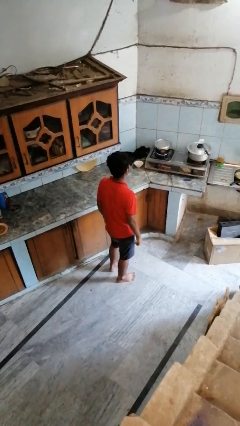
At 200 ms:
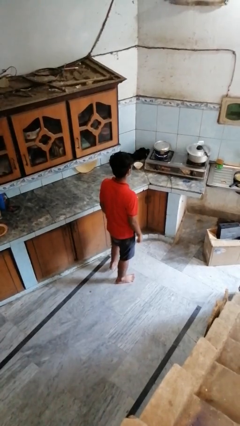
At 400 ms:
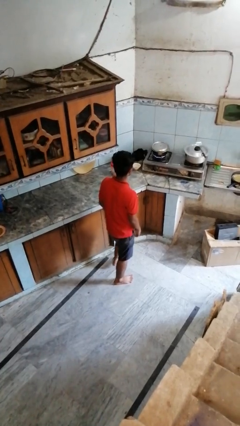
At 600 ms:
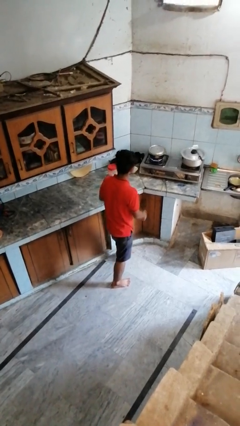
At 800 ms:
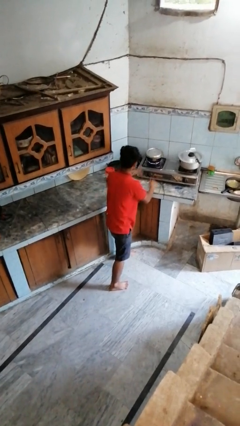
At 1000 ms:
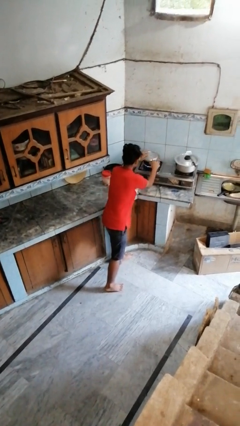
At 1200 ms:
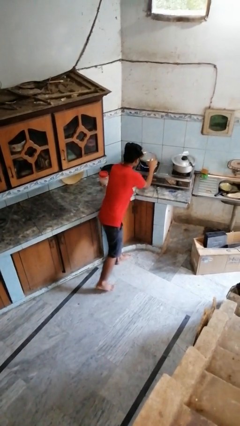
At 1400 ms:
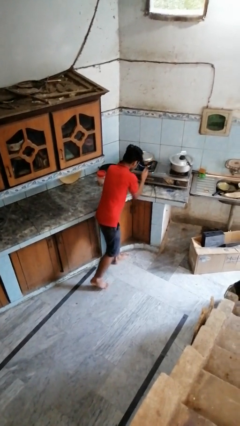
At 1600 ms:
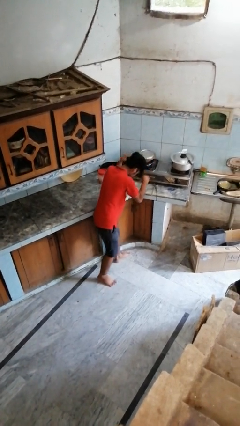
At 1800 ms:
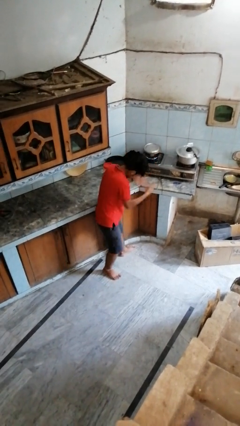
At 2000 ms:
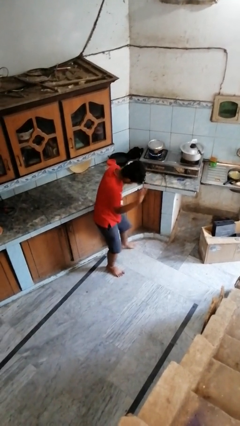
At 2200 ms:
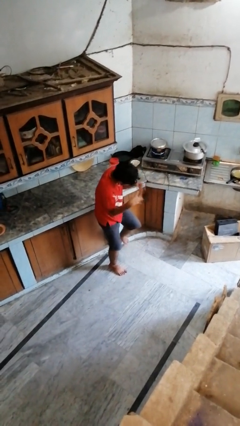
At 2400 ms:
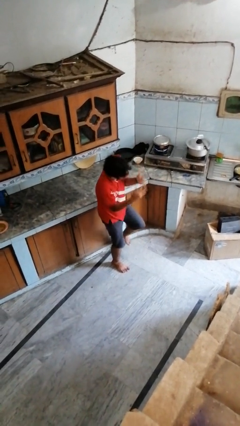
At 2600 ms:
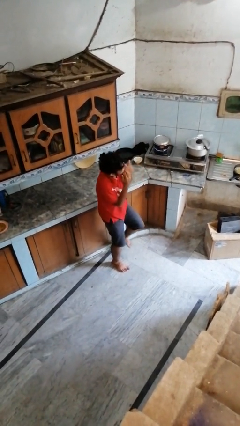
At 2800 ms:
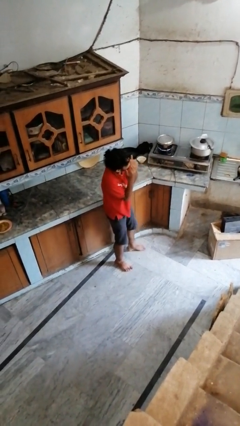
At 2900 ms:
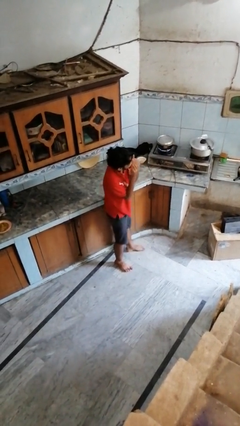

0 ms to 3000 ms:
person burns hand

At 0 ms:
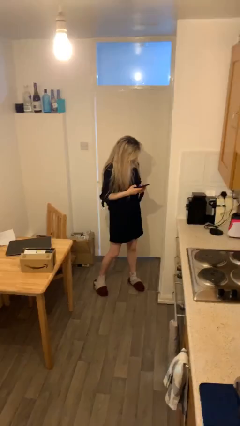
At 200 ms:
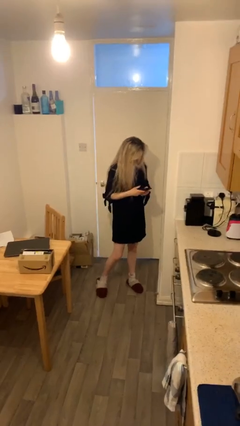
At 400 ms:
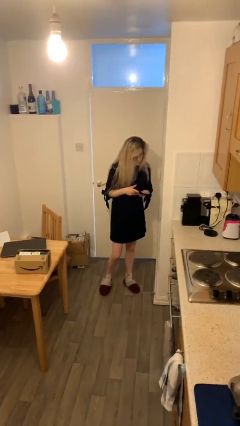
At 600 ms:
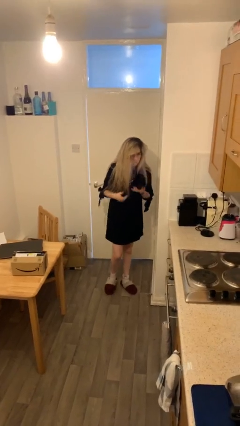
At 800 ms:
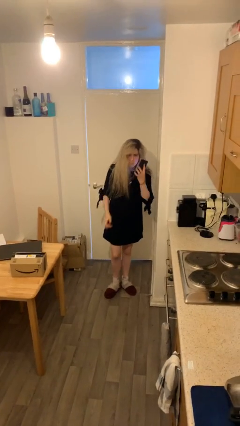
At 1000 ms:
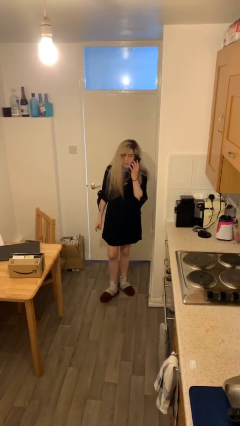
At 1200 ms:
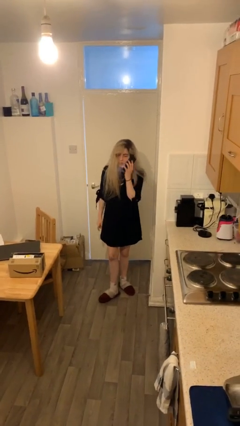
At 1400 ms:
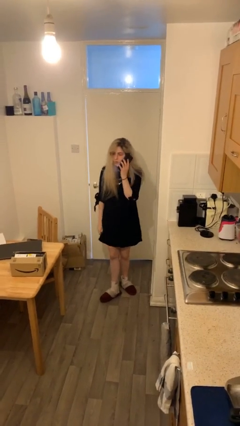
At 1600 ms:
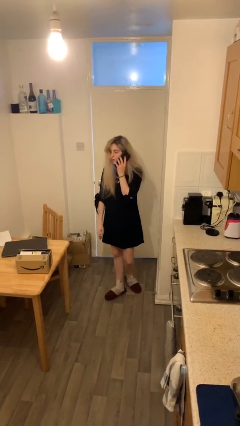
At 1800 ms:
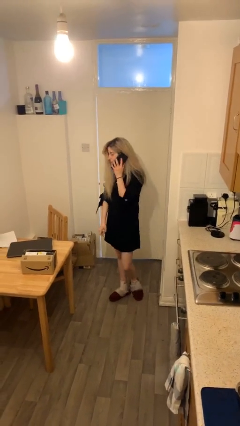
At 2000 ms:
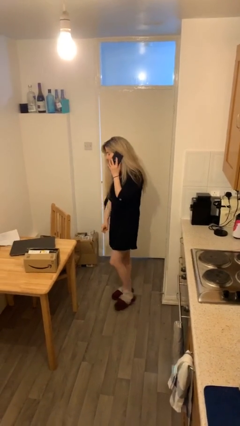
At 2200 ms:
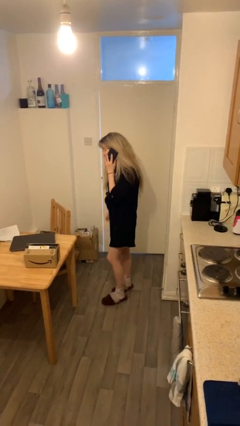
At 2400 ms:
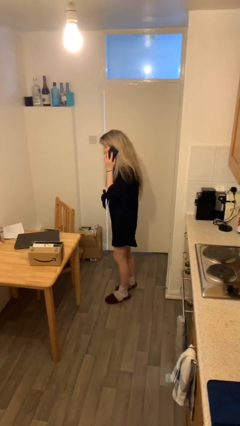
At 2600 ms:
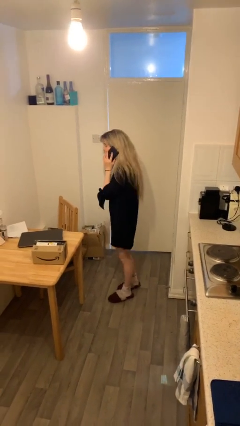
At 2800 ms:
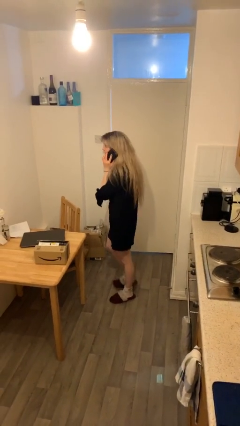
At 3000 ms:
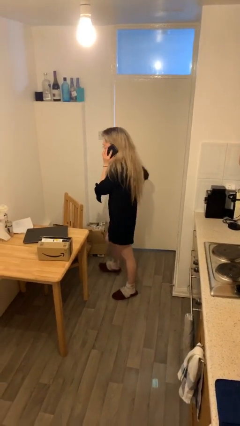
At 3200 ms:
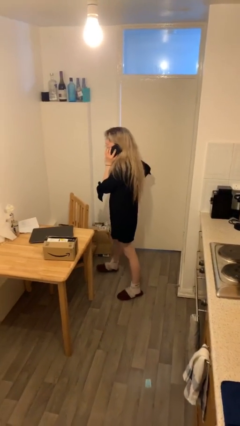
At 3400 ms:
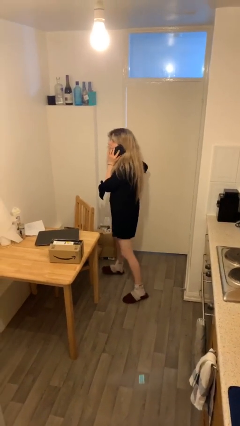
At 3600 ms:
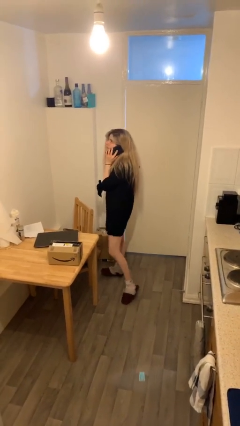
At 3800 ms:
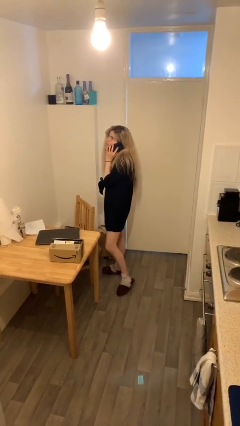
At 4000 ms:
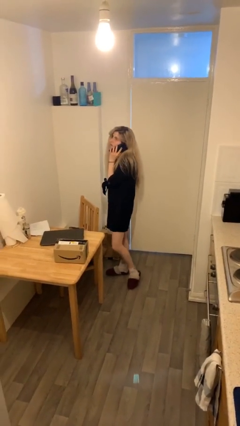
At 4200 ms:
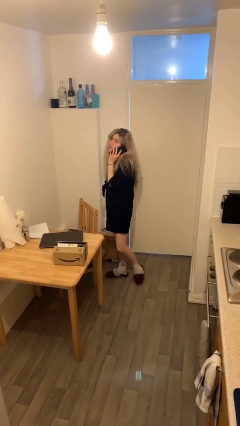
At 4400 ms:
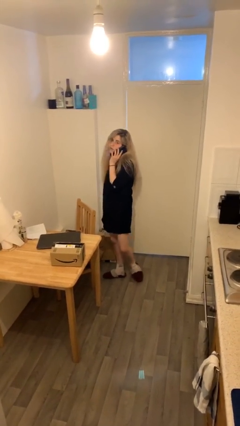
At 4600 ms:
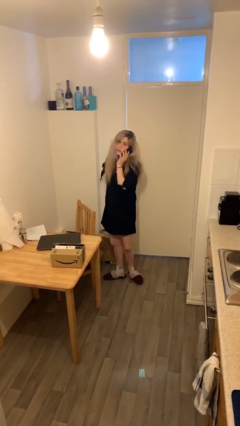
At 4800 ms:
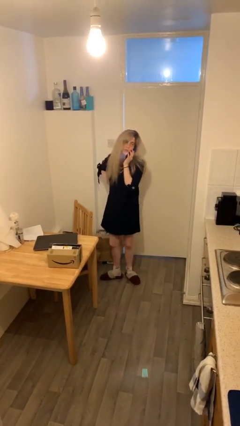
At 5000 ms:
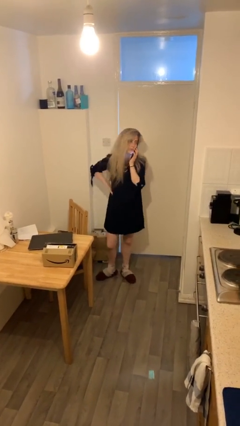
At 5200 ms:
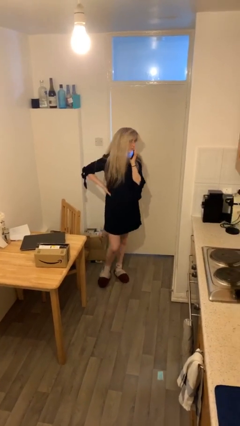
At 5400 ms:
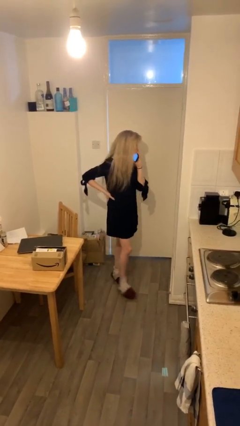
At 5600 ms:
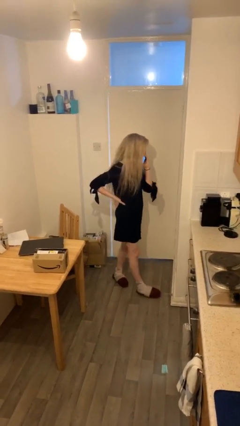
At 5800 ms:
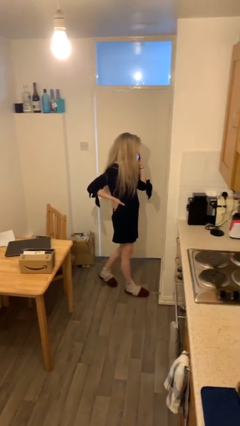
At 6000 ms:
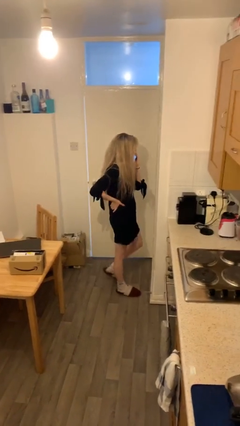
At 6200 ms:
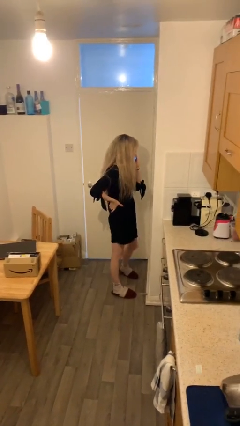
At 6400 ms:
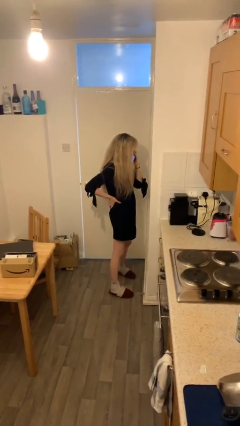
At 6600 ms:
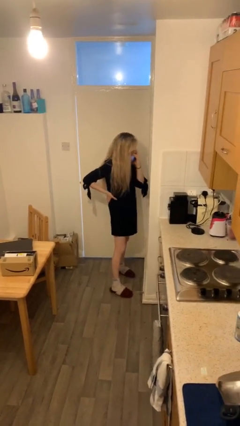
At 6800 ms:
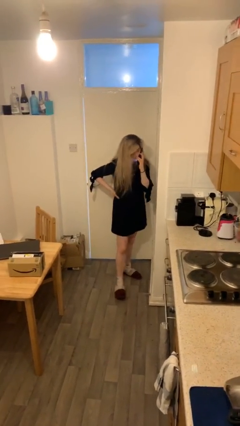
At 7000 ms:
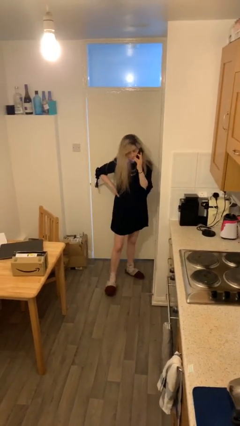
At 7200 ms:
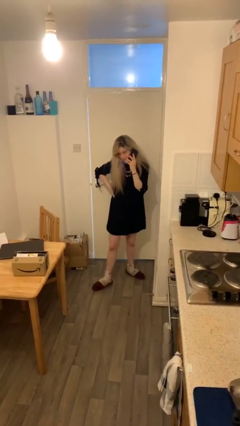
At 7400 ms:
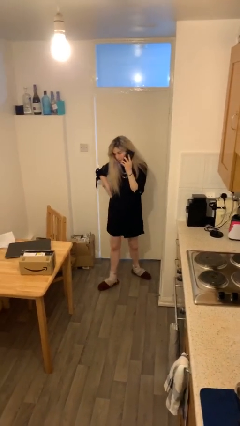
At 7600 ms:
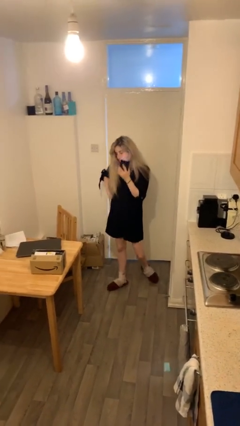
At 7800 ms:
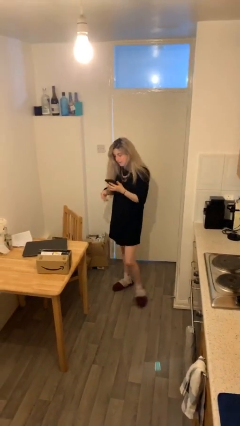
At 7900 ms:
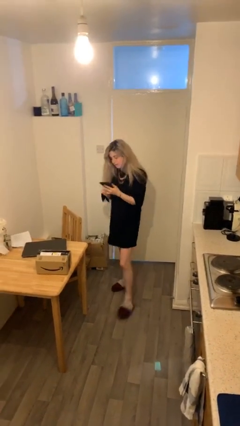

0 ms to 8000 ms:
person talks on phone

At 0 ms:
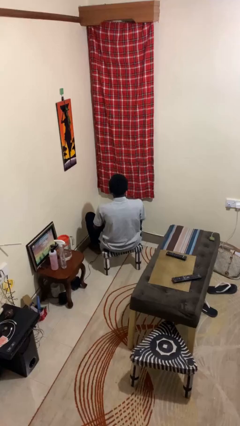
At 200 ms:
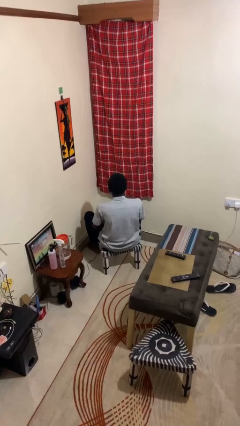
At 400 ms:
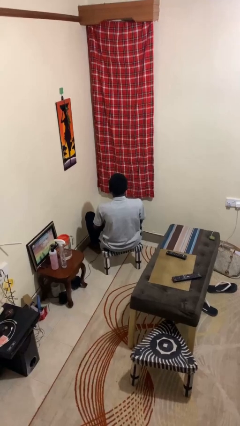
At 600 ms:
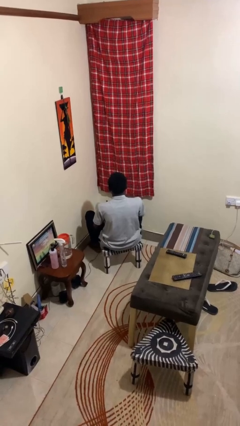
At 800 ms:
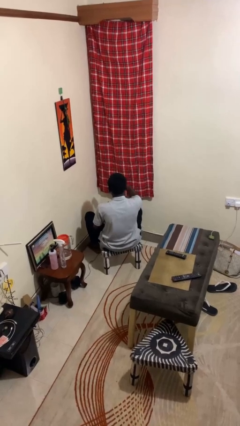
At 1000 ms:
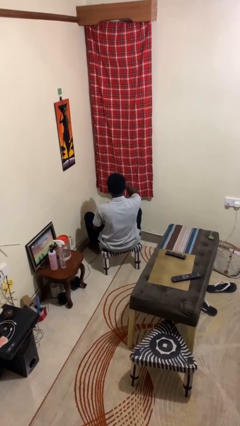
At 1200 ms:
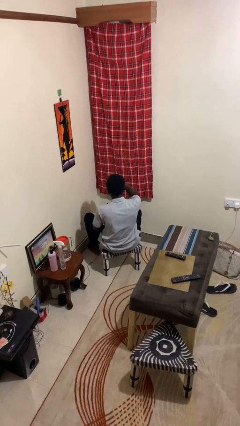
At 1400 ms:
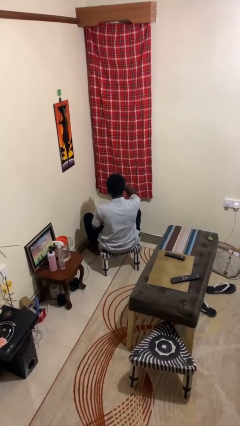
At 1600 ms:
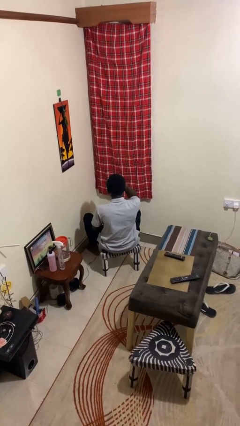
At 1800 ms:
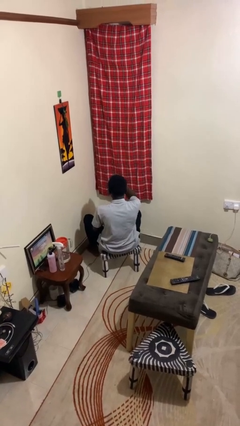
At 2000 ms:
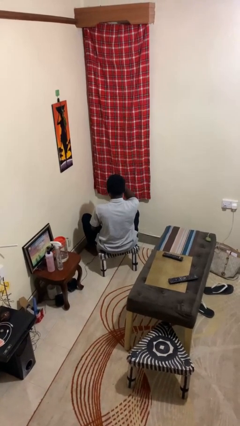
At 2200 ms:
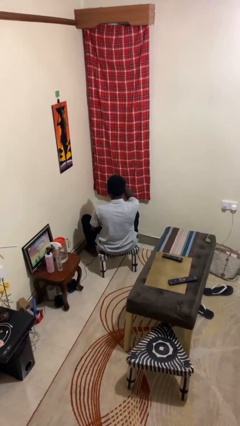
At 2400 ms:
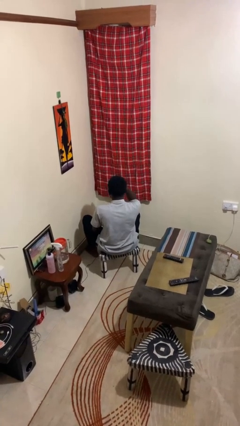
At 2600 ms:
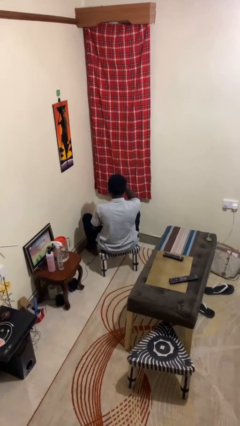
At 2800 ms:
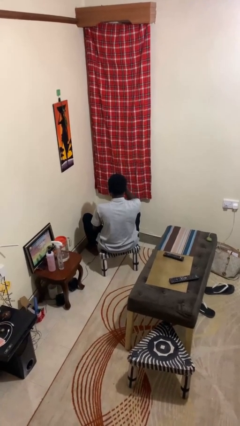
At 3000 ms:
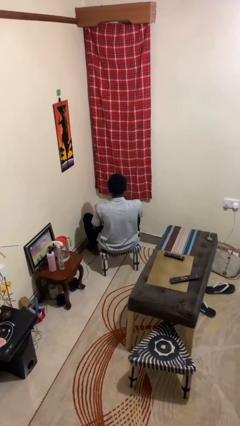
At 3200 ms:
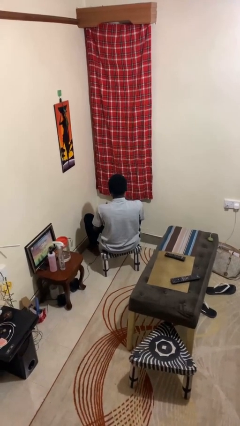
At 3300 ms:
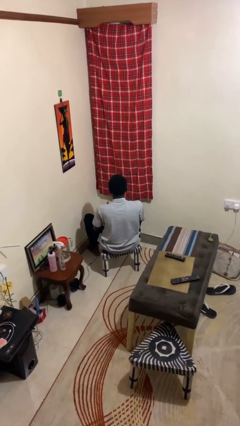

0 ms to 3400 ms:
person scratches face

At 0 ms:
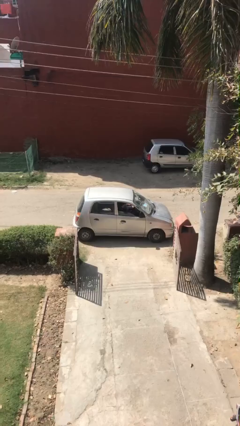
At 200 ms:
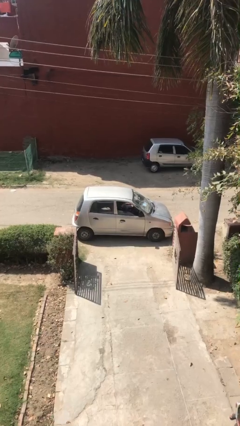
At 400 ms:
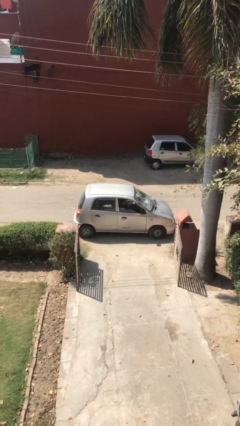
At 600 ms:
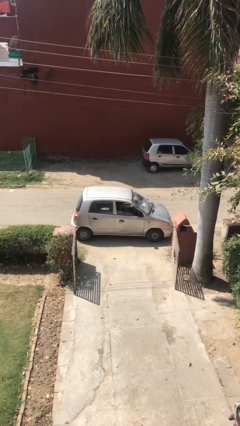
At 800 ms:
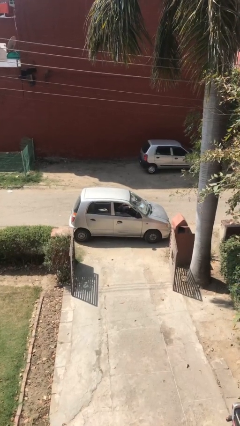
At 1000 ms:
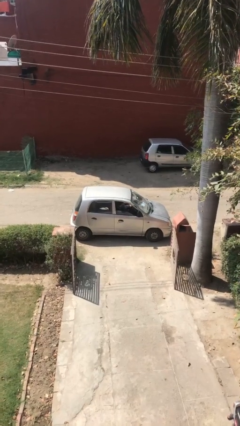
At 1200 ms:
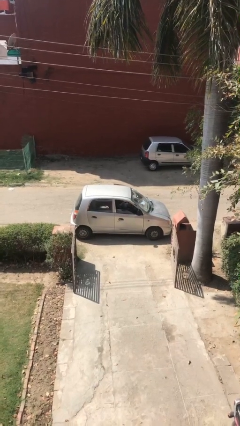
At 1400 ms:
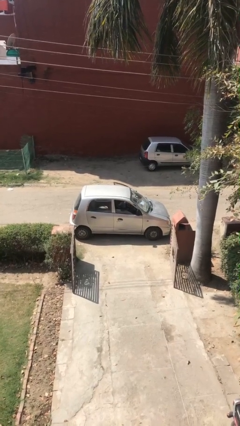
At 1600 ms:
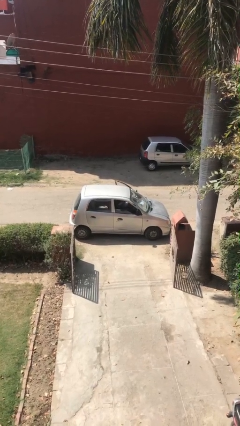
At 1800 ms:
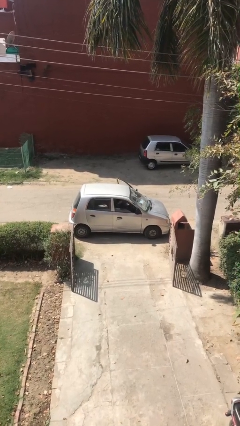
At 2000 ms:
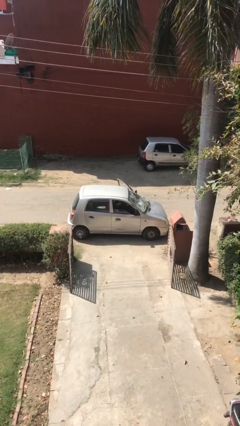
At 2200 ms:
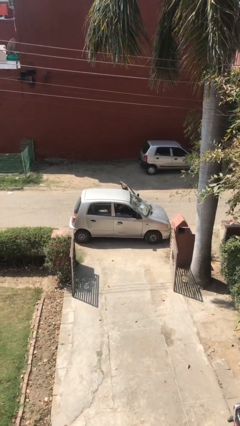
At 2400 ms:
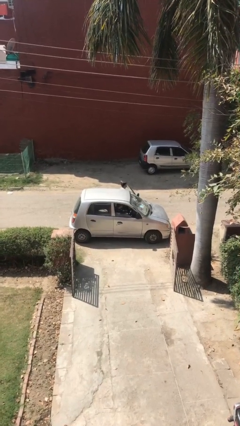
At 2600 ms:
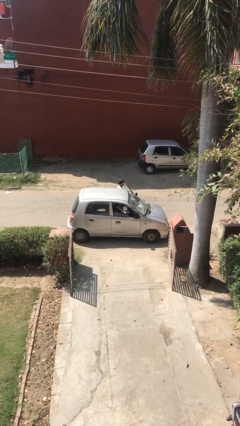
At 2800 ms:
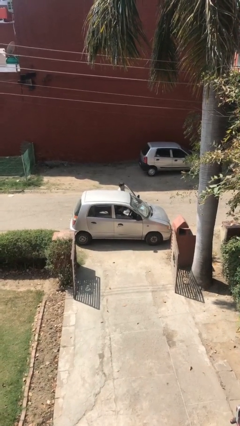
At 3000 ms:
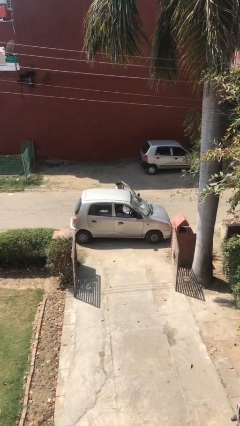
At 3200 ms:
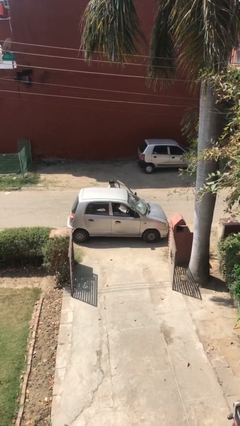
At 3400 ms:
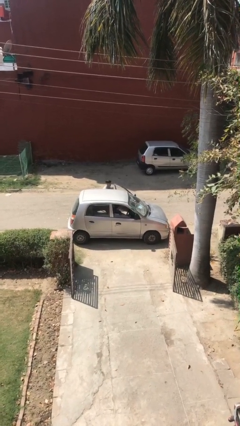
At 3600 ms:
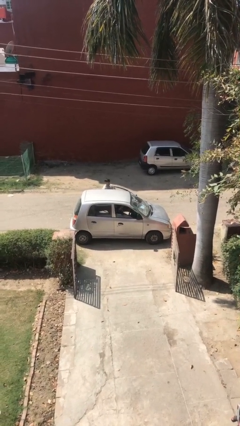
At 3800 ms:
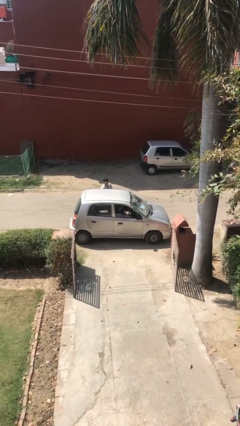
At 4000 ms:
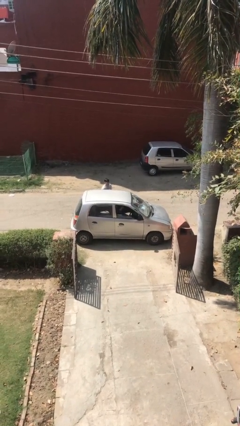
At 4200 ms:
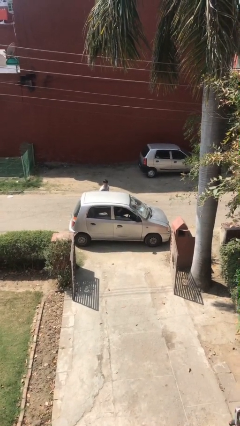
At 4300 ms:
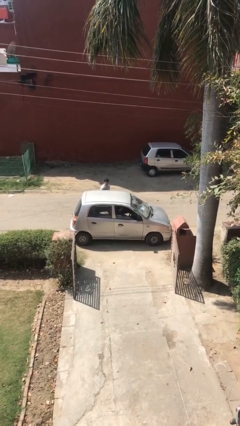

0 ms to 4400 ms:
car drops off person
